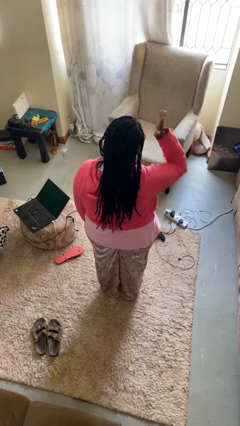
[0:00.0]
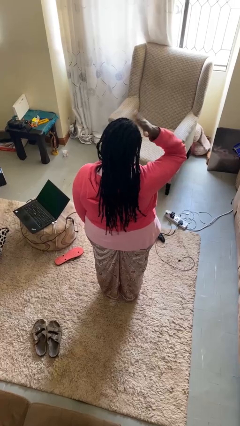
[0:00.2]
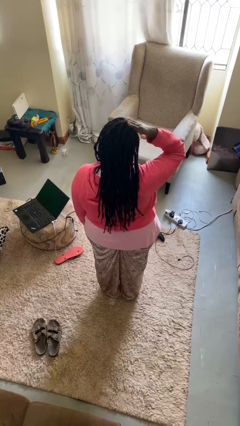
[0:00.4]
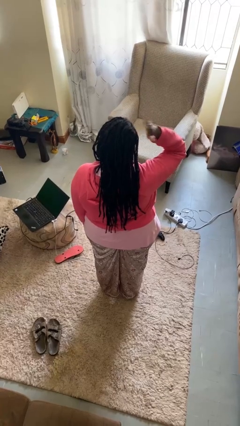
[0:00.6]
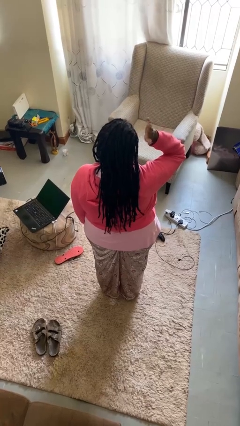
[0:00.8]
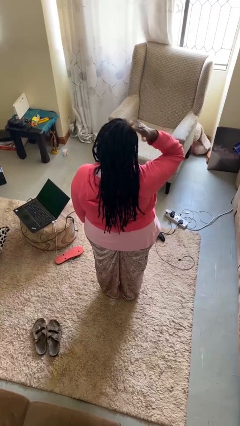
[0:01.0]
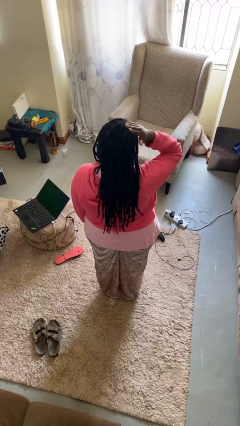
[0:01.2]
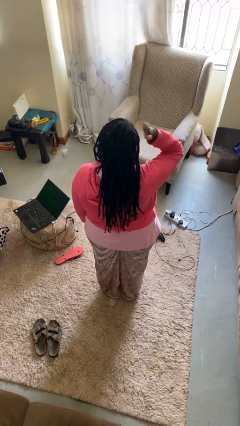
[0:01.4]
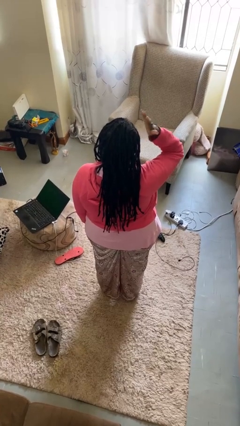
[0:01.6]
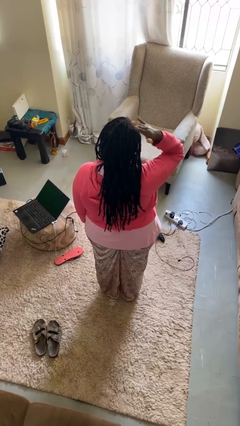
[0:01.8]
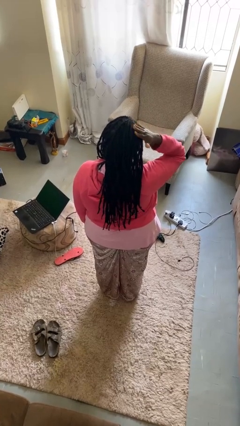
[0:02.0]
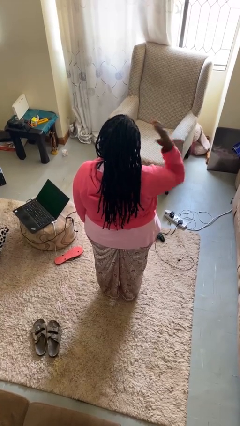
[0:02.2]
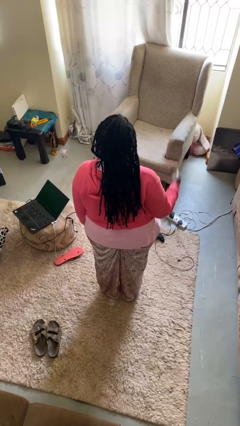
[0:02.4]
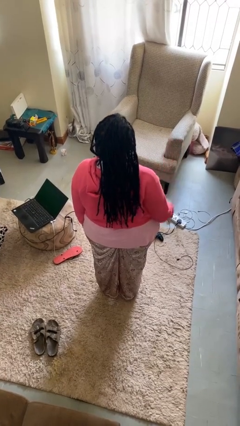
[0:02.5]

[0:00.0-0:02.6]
person pats head

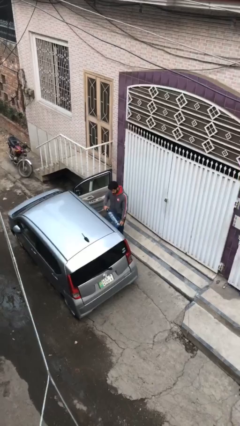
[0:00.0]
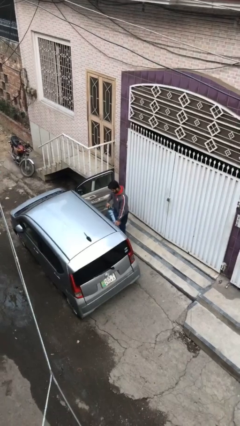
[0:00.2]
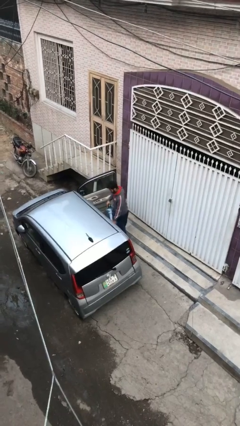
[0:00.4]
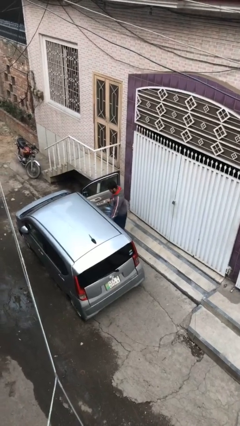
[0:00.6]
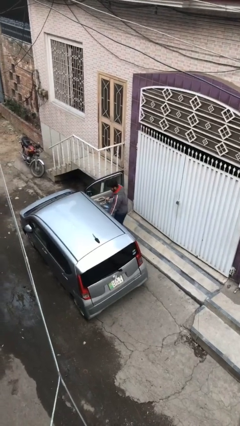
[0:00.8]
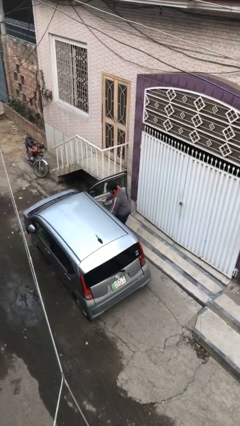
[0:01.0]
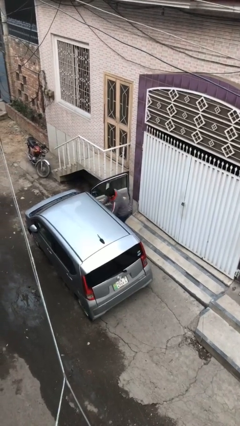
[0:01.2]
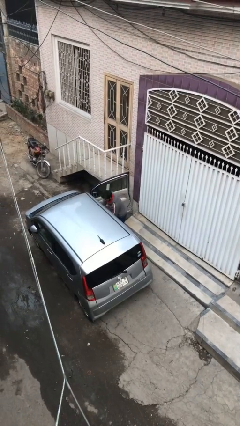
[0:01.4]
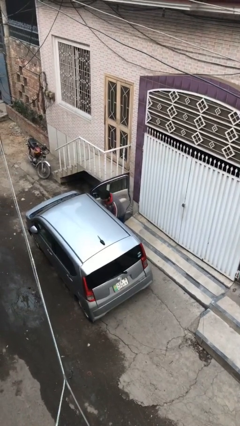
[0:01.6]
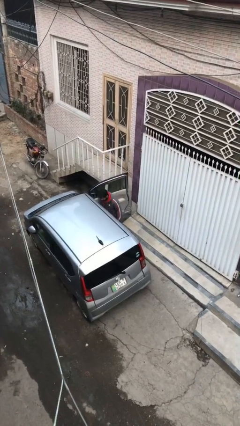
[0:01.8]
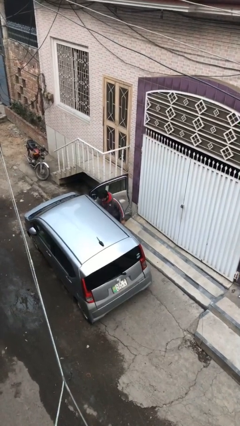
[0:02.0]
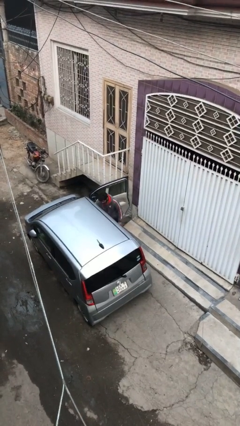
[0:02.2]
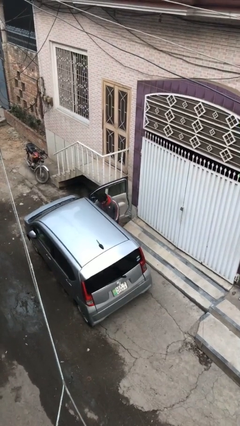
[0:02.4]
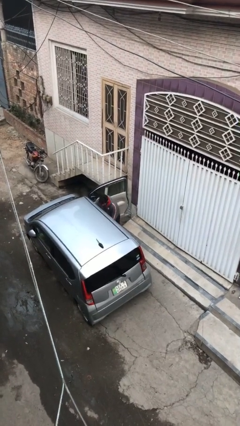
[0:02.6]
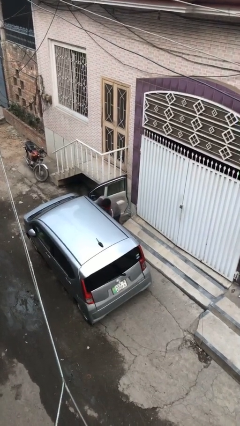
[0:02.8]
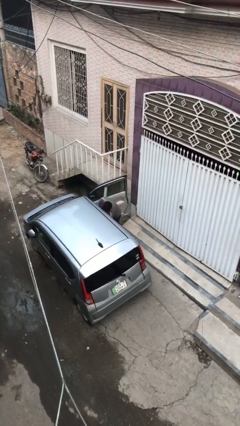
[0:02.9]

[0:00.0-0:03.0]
person loads car

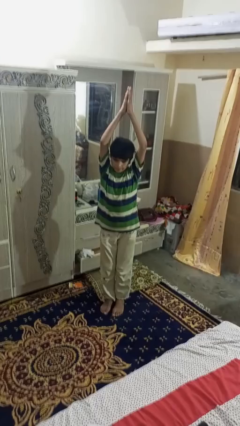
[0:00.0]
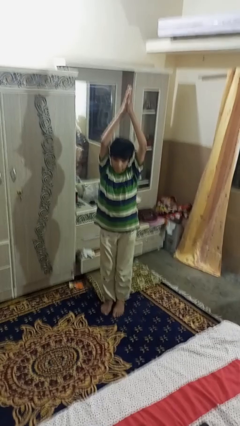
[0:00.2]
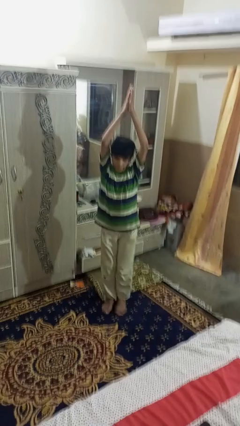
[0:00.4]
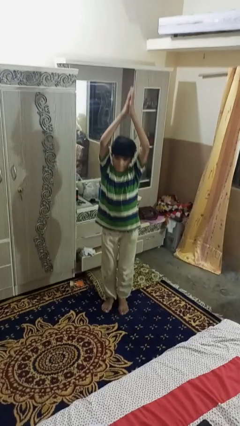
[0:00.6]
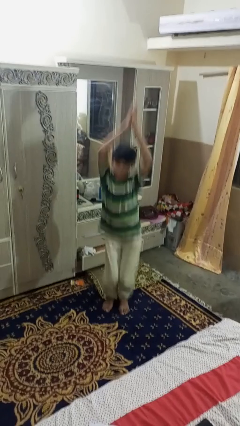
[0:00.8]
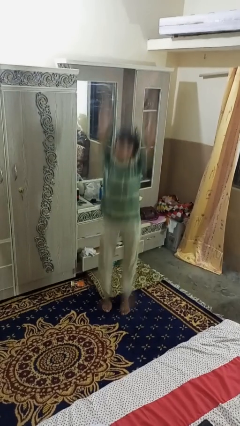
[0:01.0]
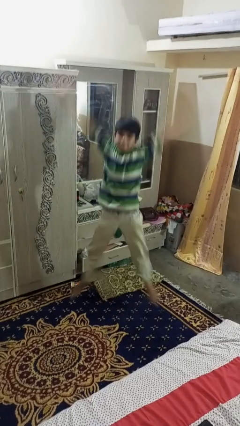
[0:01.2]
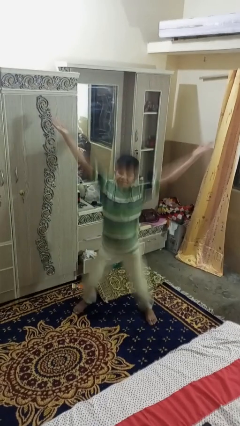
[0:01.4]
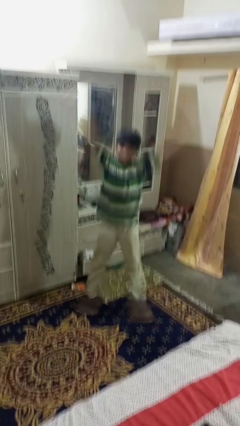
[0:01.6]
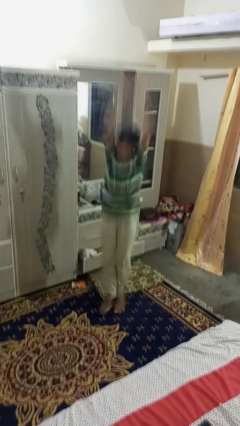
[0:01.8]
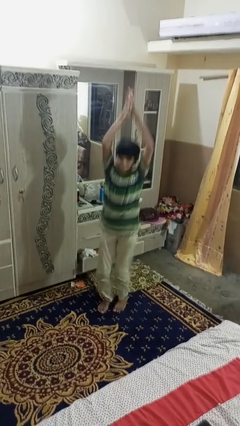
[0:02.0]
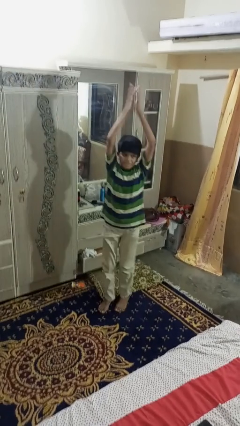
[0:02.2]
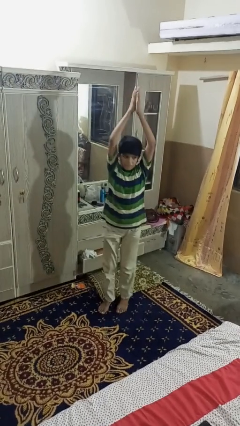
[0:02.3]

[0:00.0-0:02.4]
person exercises with jumping jacks

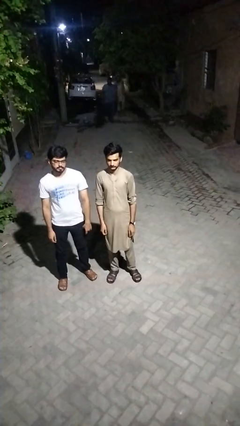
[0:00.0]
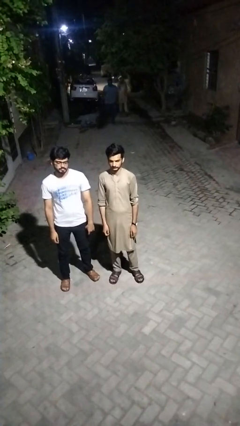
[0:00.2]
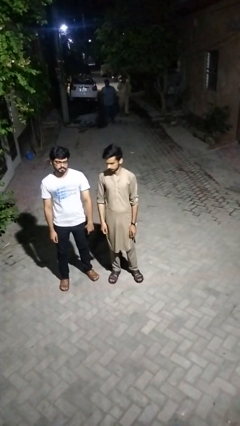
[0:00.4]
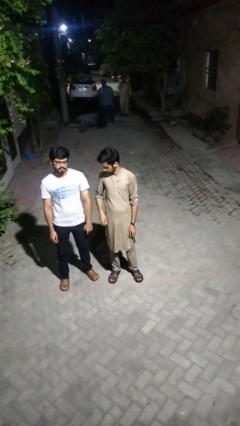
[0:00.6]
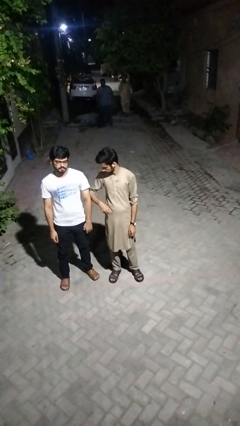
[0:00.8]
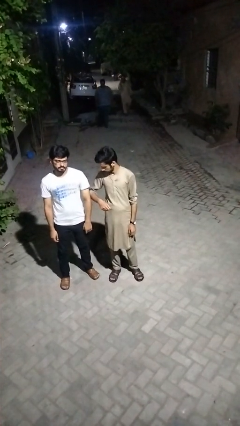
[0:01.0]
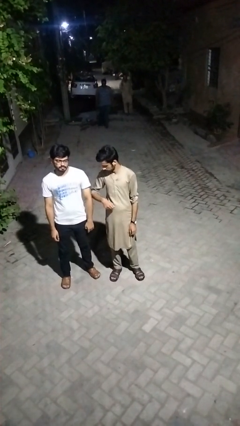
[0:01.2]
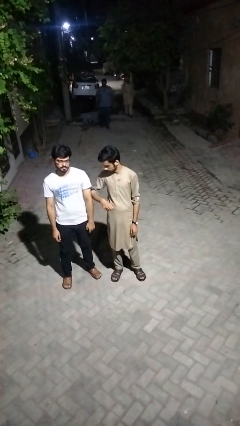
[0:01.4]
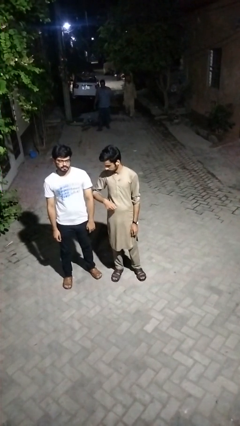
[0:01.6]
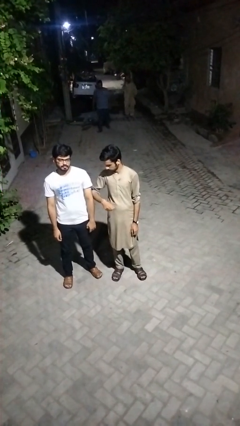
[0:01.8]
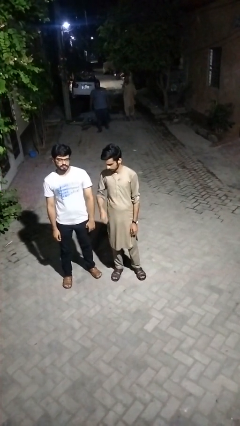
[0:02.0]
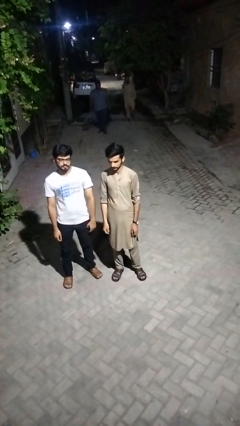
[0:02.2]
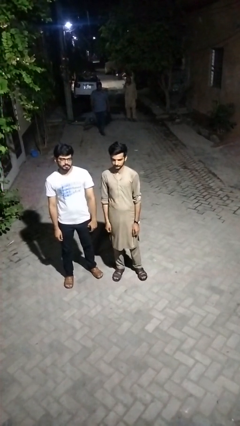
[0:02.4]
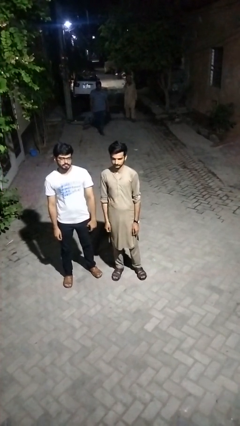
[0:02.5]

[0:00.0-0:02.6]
person nudges person with elbow

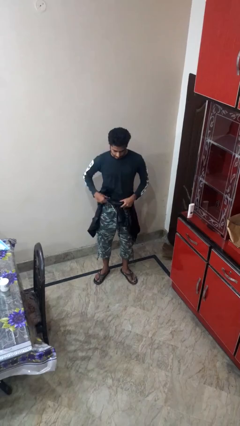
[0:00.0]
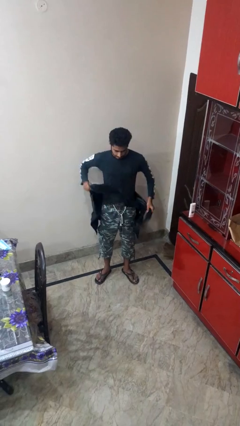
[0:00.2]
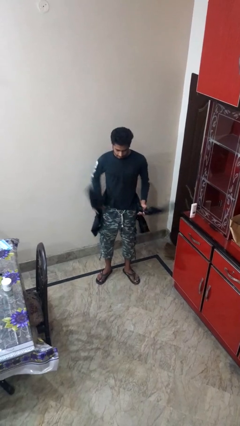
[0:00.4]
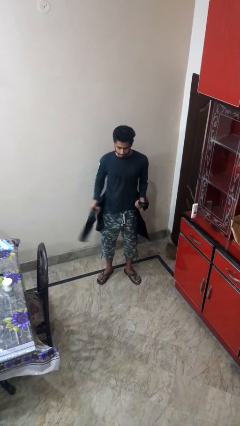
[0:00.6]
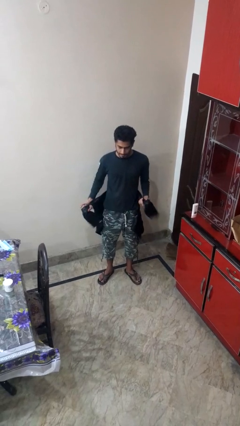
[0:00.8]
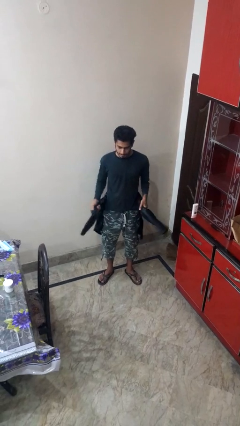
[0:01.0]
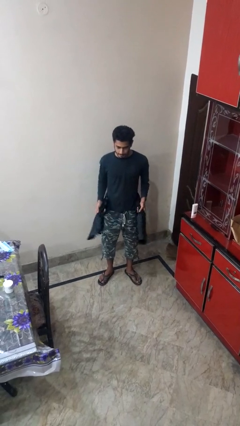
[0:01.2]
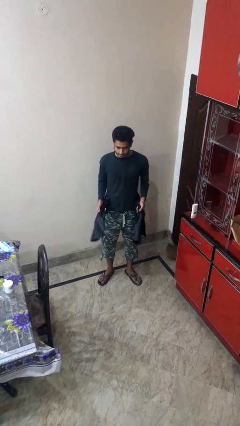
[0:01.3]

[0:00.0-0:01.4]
person unties jacket around waist

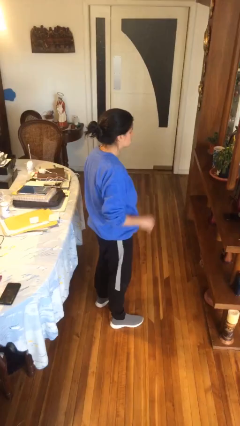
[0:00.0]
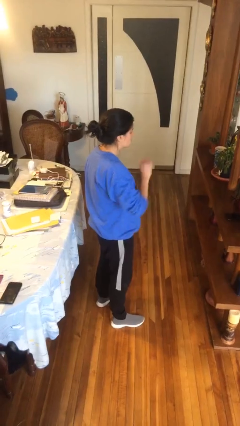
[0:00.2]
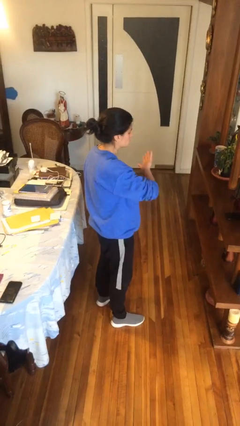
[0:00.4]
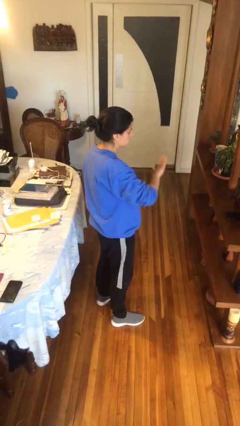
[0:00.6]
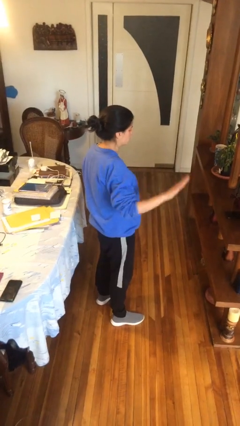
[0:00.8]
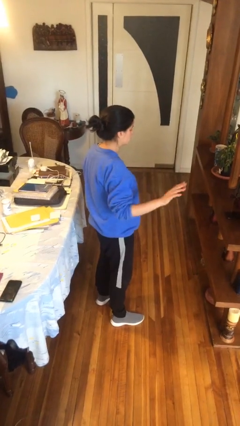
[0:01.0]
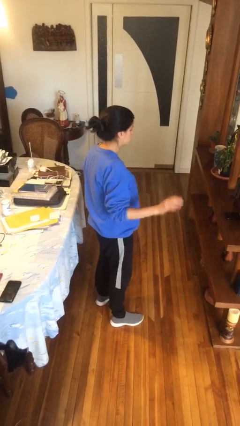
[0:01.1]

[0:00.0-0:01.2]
person gestures swipe right

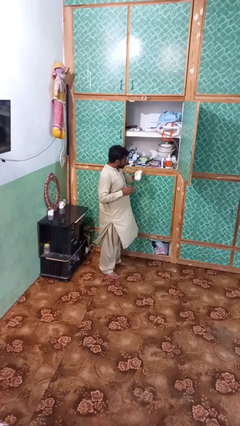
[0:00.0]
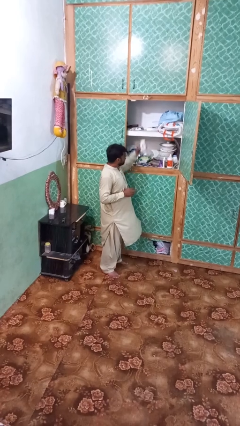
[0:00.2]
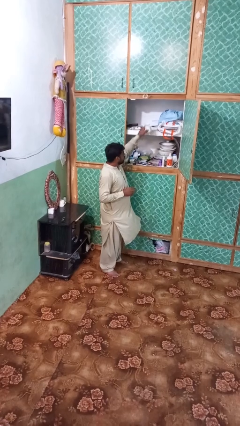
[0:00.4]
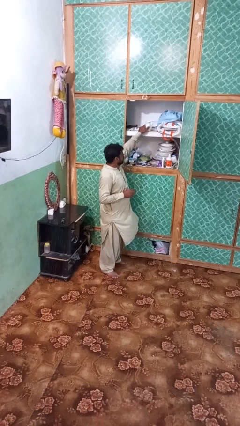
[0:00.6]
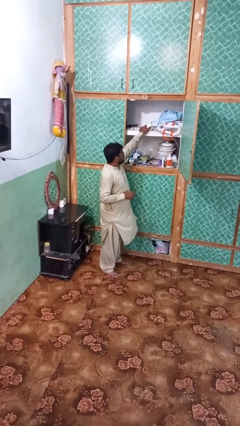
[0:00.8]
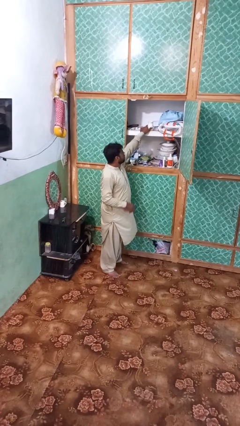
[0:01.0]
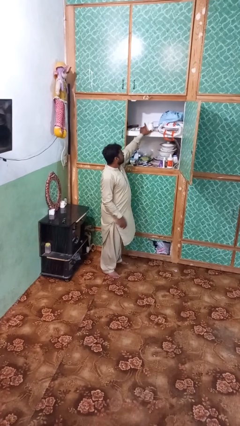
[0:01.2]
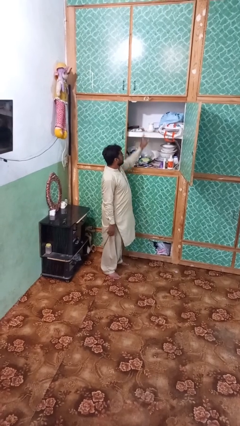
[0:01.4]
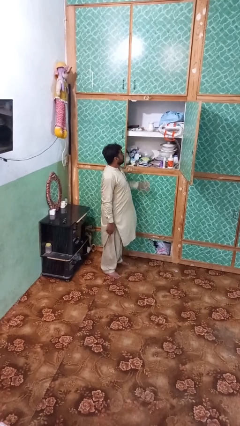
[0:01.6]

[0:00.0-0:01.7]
person puts down object on shelf

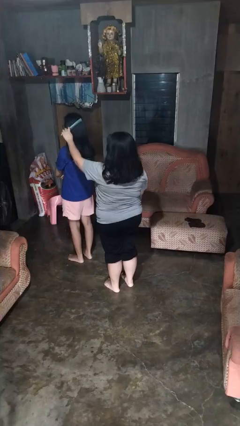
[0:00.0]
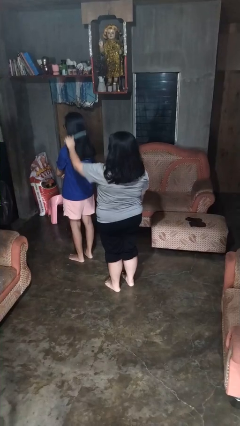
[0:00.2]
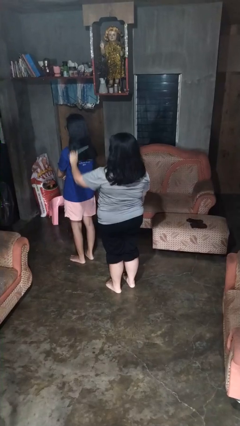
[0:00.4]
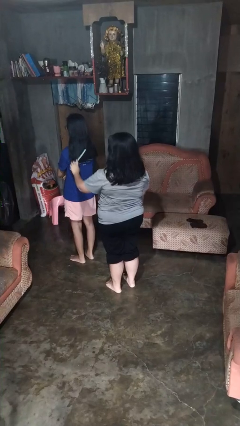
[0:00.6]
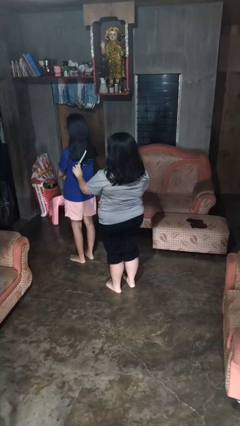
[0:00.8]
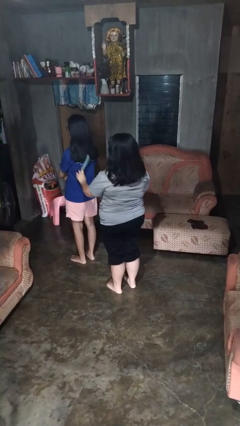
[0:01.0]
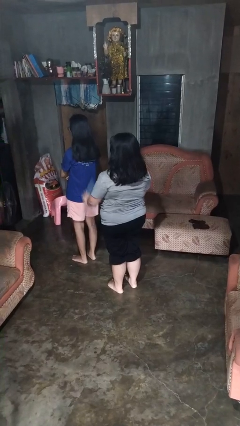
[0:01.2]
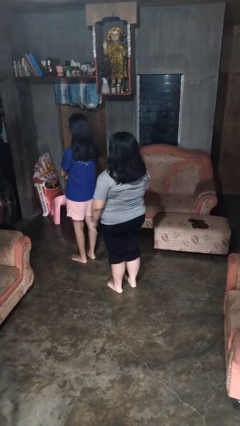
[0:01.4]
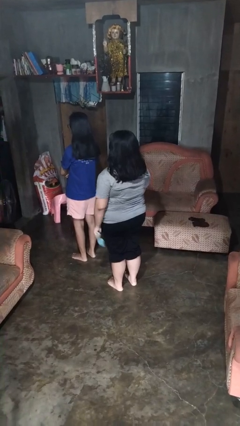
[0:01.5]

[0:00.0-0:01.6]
person brushes hair of person

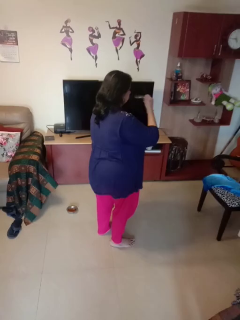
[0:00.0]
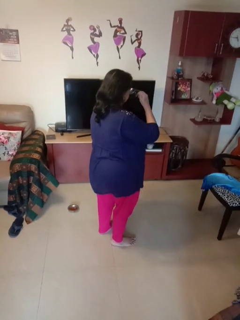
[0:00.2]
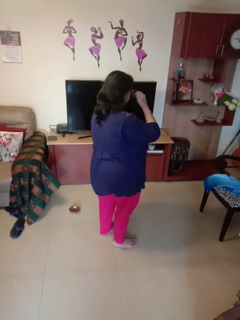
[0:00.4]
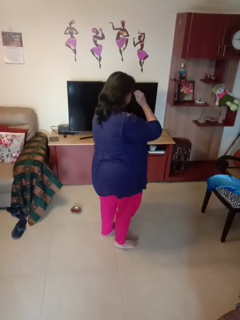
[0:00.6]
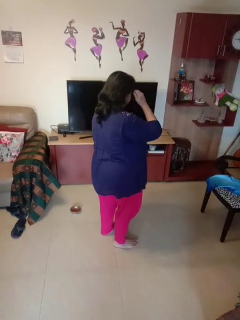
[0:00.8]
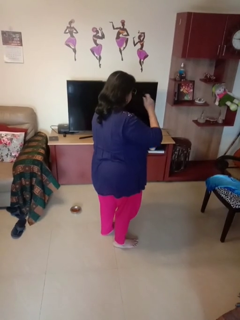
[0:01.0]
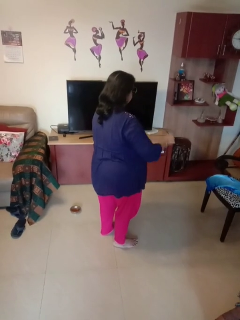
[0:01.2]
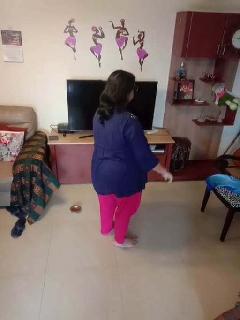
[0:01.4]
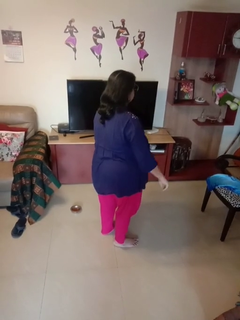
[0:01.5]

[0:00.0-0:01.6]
person puts on sunglasses
